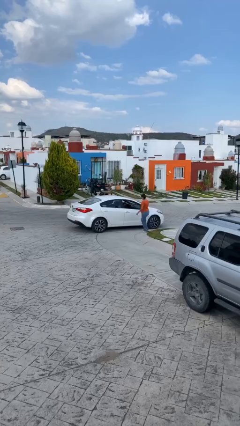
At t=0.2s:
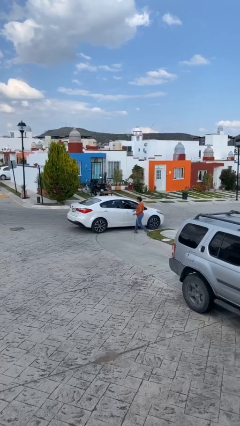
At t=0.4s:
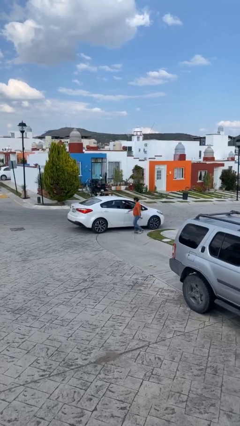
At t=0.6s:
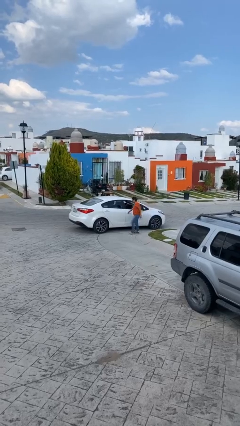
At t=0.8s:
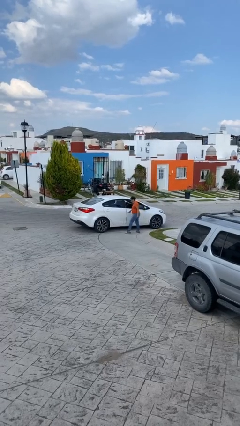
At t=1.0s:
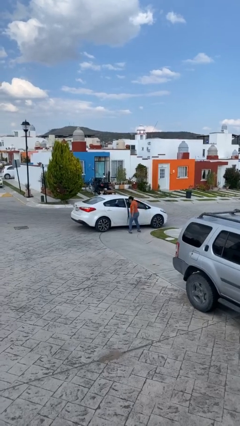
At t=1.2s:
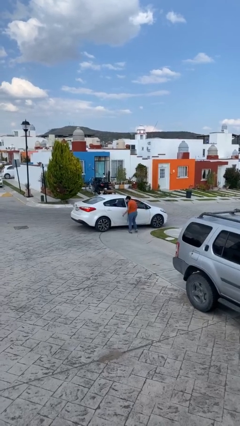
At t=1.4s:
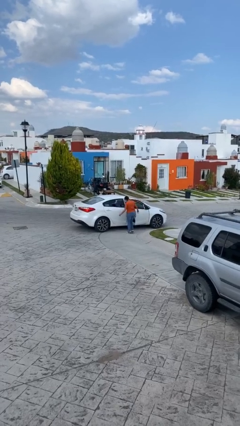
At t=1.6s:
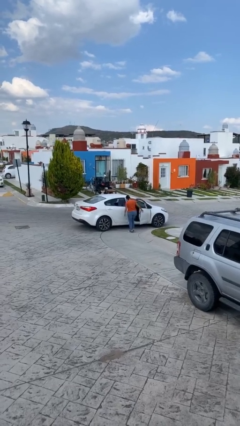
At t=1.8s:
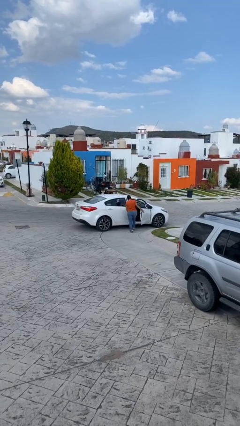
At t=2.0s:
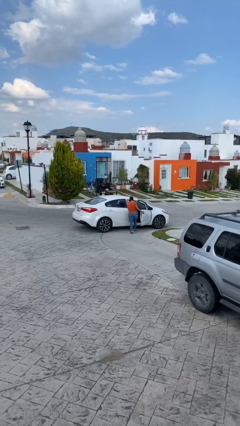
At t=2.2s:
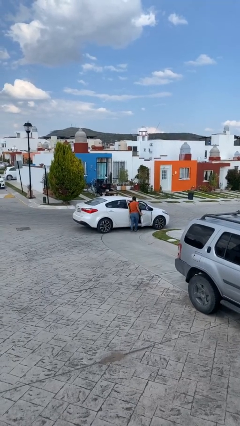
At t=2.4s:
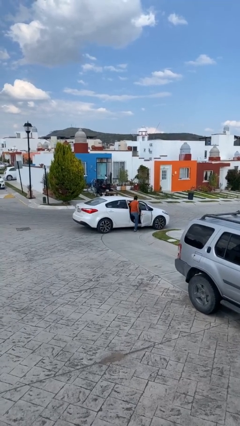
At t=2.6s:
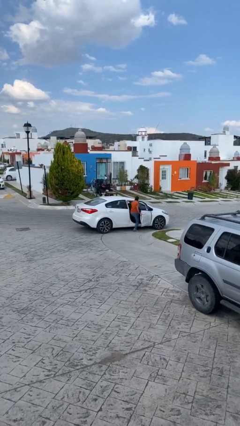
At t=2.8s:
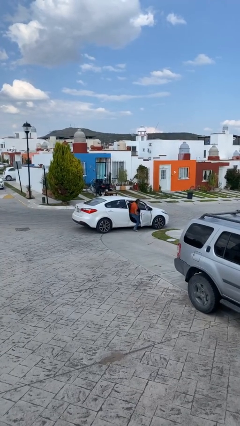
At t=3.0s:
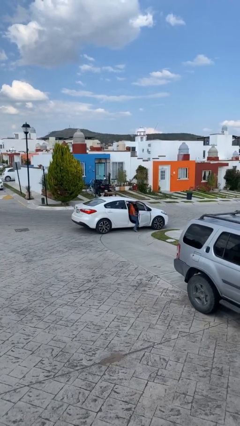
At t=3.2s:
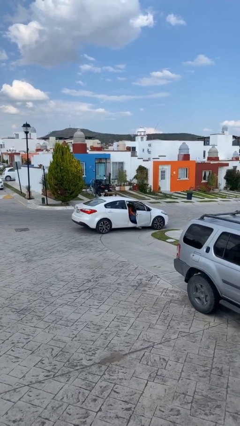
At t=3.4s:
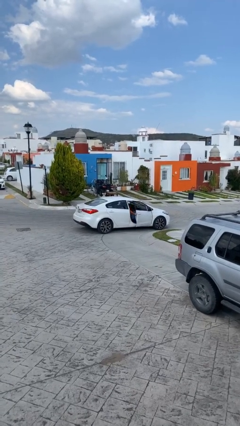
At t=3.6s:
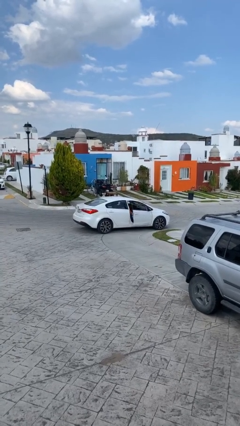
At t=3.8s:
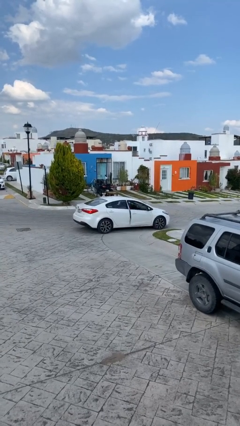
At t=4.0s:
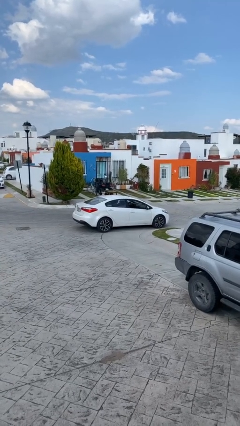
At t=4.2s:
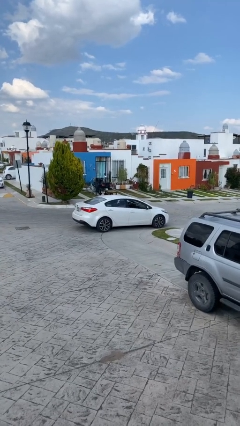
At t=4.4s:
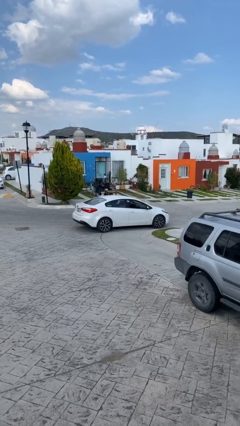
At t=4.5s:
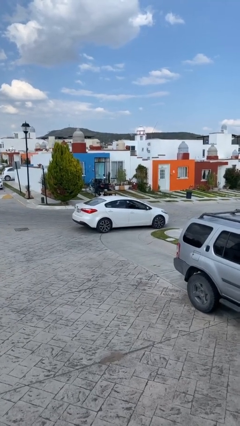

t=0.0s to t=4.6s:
car picks up person

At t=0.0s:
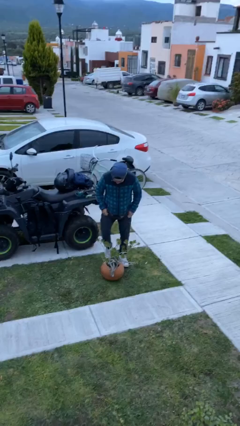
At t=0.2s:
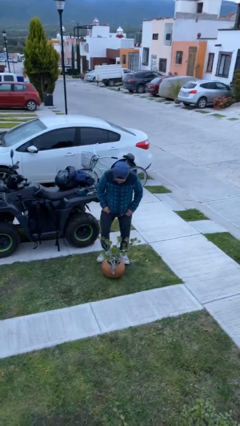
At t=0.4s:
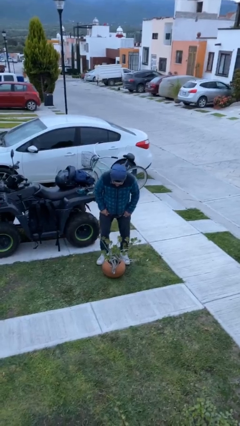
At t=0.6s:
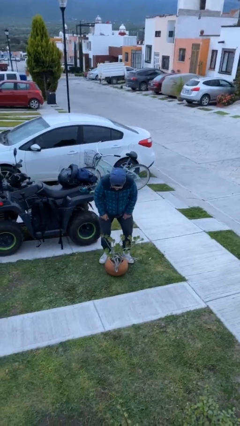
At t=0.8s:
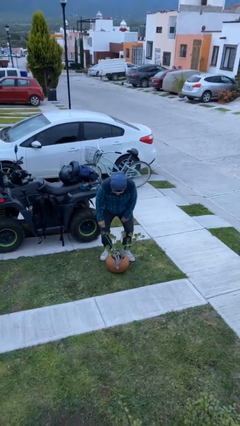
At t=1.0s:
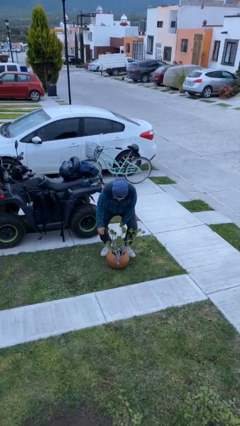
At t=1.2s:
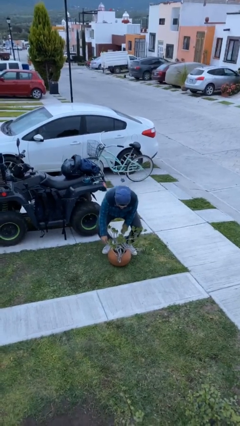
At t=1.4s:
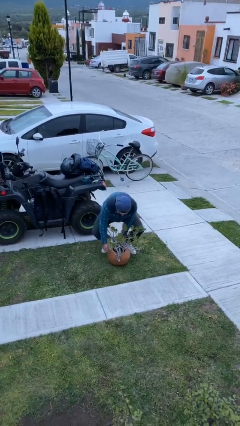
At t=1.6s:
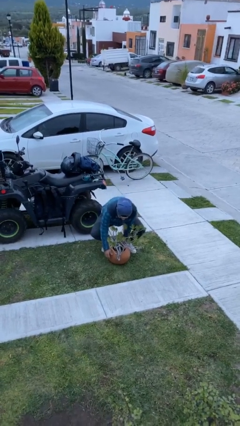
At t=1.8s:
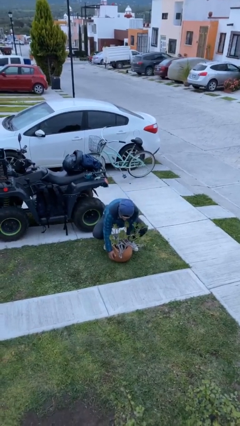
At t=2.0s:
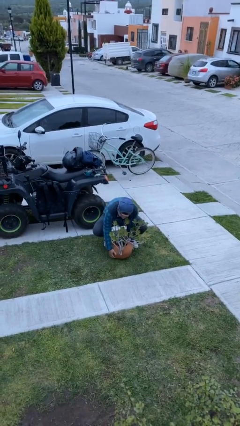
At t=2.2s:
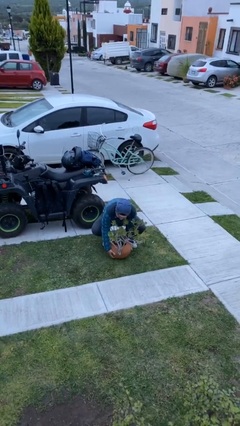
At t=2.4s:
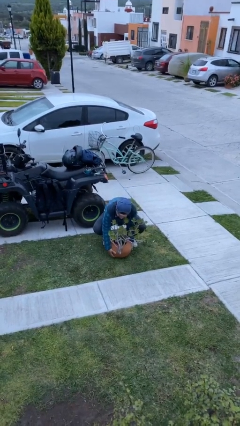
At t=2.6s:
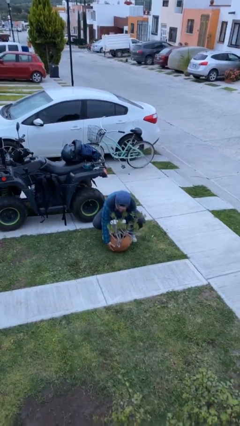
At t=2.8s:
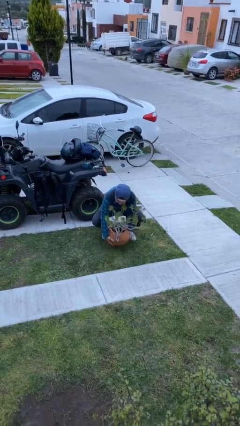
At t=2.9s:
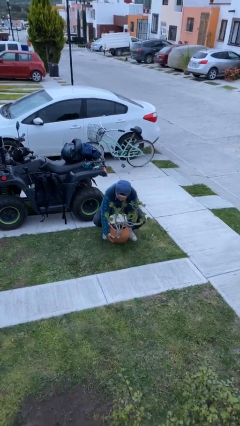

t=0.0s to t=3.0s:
person picks up object from floor

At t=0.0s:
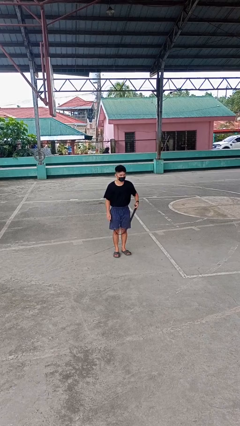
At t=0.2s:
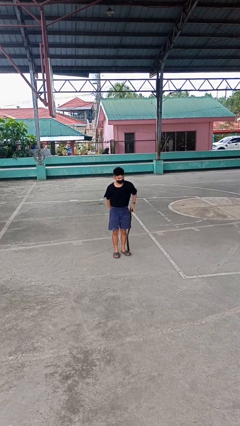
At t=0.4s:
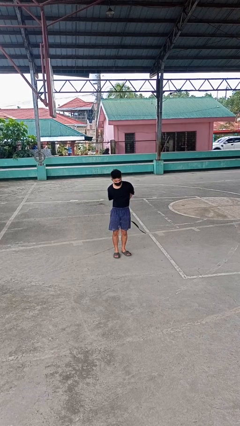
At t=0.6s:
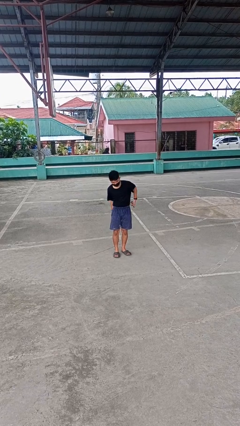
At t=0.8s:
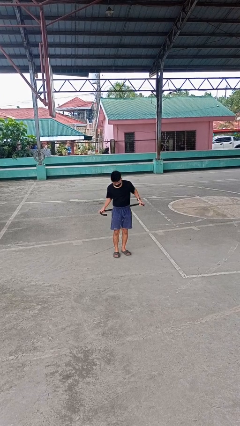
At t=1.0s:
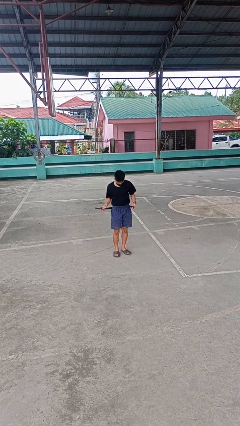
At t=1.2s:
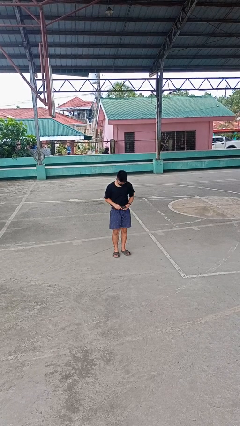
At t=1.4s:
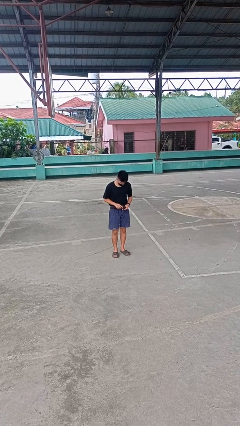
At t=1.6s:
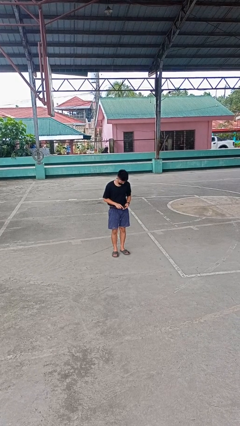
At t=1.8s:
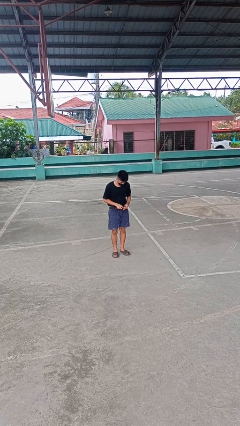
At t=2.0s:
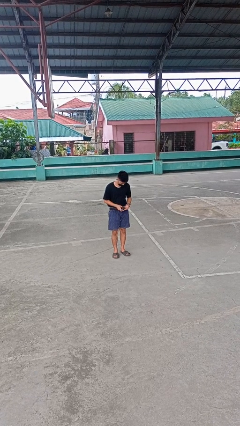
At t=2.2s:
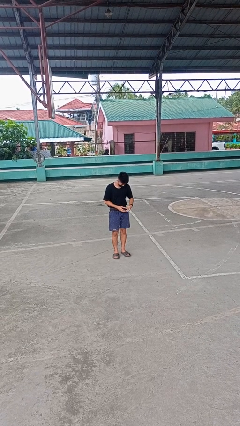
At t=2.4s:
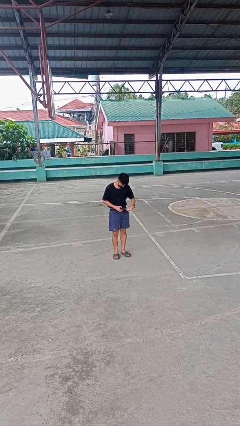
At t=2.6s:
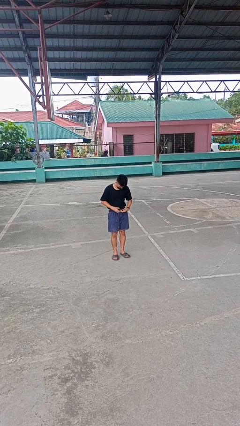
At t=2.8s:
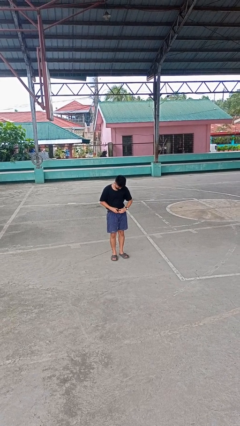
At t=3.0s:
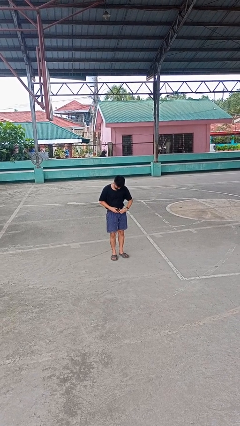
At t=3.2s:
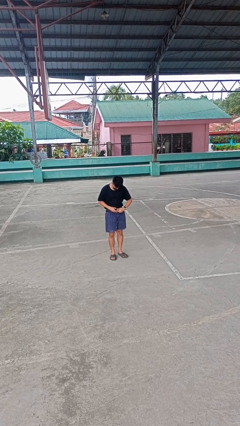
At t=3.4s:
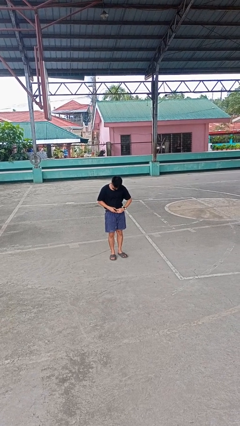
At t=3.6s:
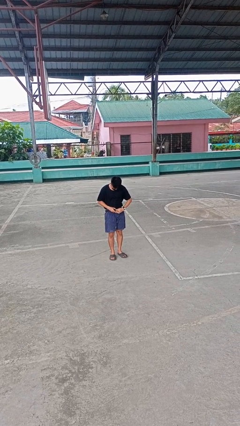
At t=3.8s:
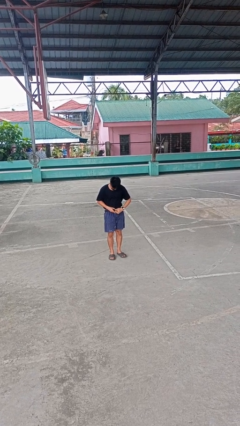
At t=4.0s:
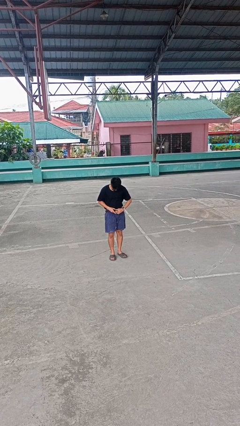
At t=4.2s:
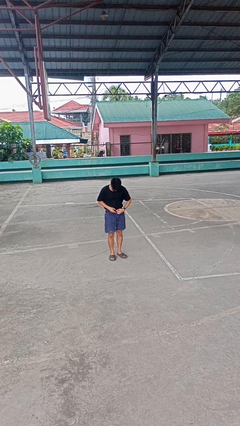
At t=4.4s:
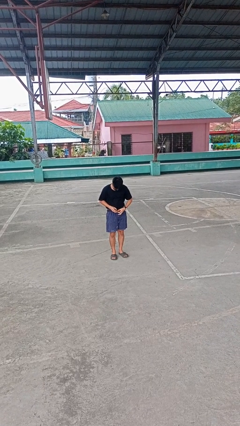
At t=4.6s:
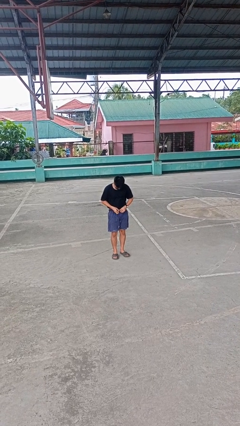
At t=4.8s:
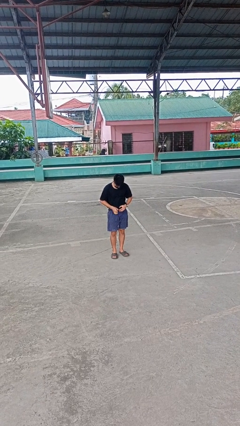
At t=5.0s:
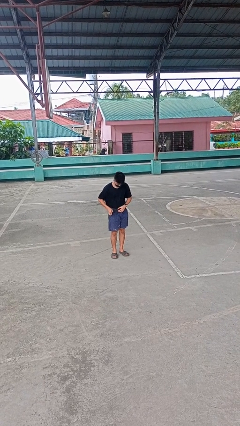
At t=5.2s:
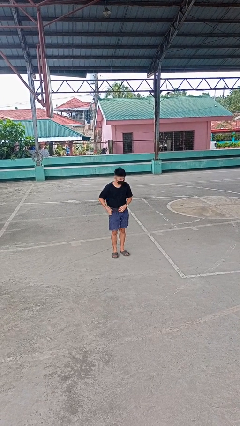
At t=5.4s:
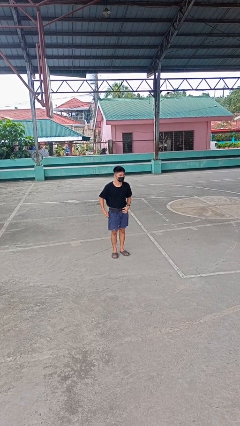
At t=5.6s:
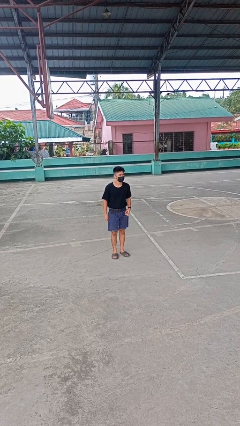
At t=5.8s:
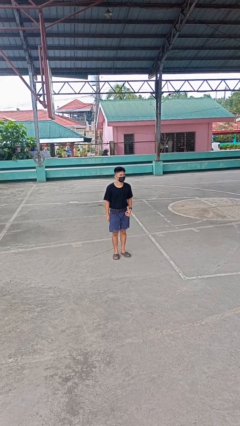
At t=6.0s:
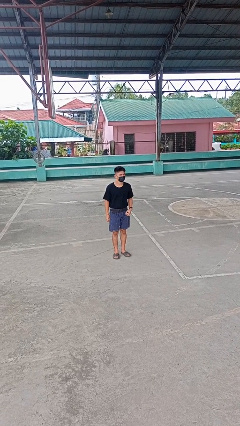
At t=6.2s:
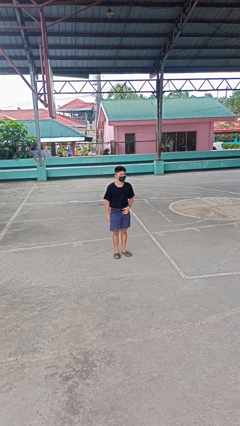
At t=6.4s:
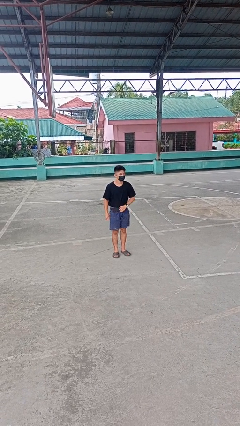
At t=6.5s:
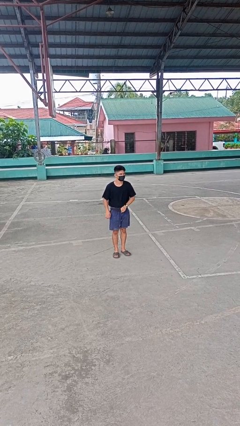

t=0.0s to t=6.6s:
person puts on belt

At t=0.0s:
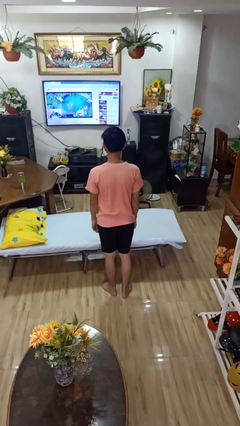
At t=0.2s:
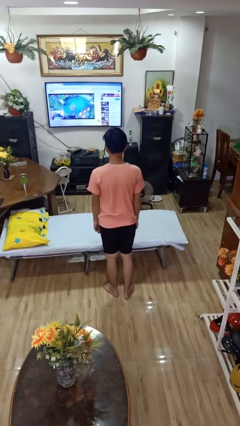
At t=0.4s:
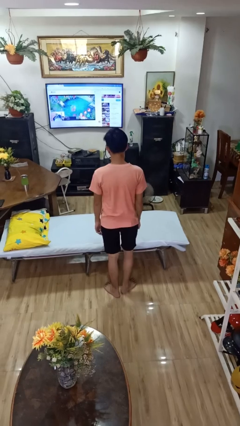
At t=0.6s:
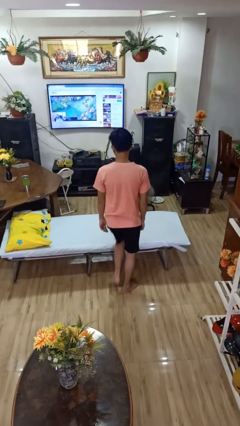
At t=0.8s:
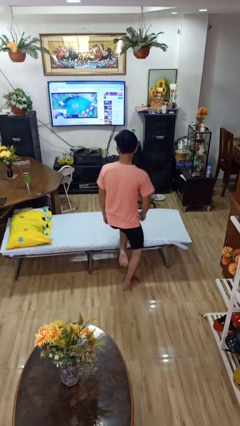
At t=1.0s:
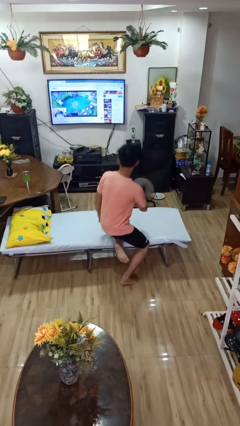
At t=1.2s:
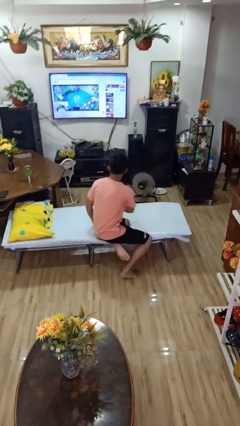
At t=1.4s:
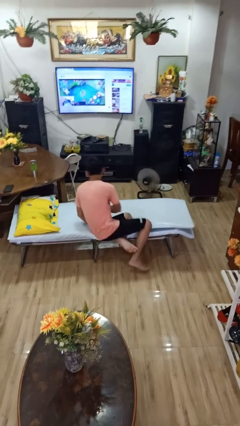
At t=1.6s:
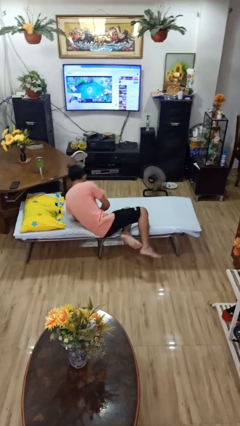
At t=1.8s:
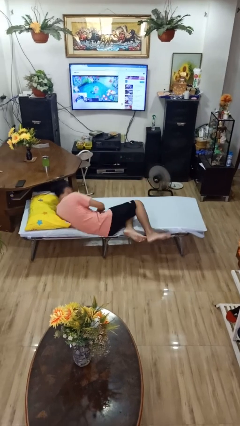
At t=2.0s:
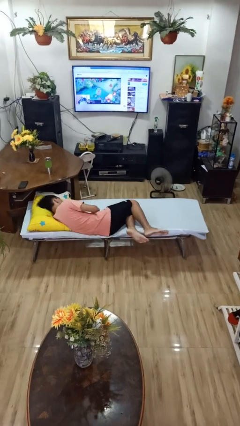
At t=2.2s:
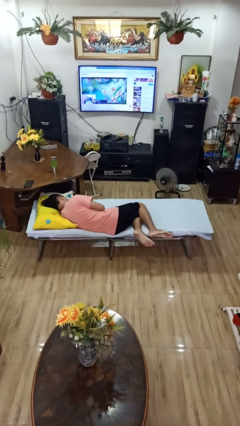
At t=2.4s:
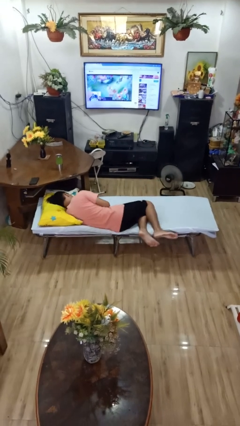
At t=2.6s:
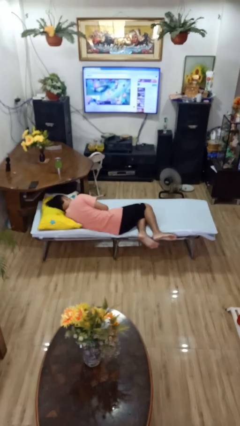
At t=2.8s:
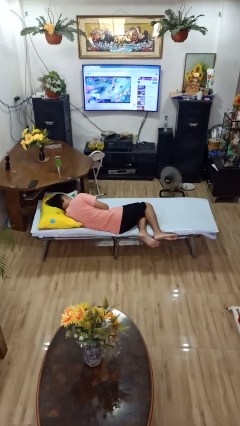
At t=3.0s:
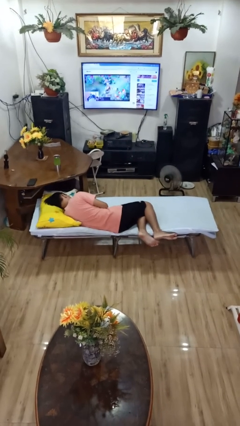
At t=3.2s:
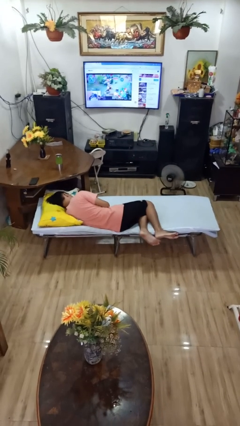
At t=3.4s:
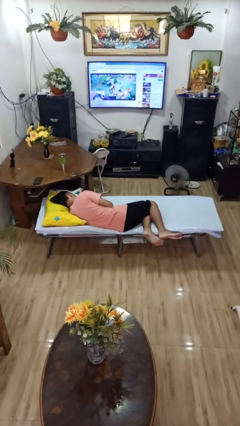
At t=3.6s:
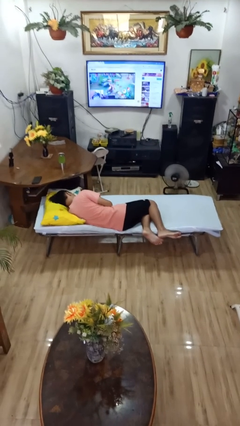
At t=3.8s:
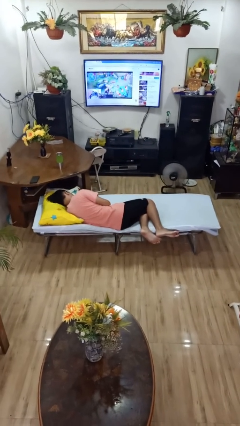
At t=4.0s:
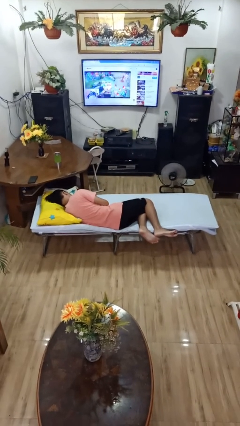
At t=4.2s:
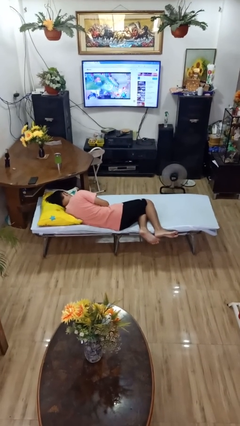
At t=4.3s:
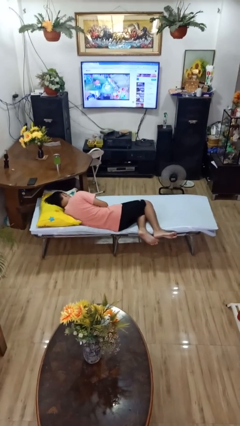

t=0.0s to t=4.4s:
person lies down on bed
